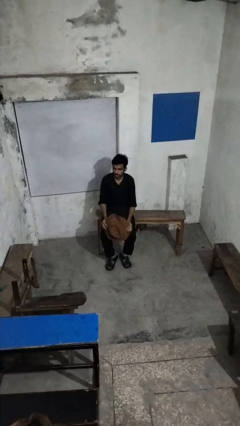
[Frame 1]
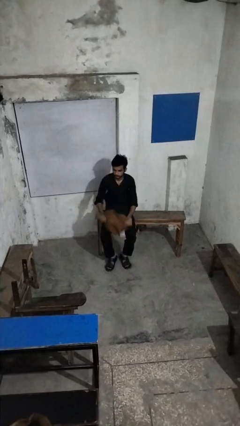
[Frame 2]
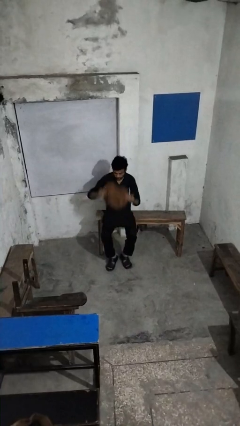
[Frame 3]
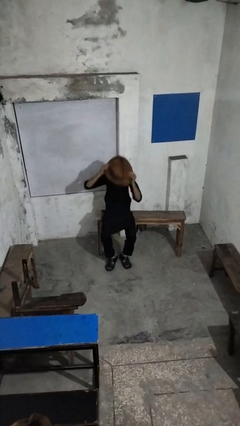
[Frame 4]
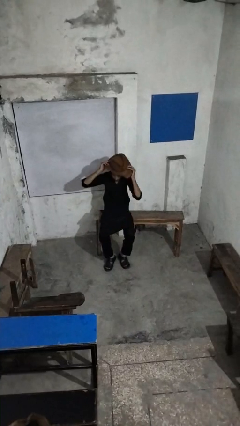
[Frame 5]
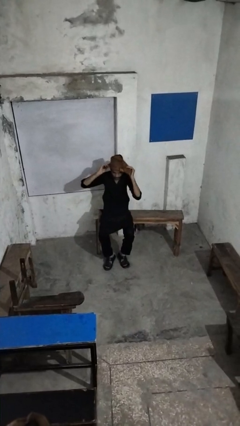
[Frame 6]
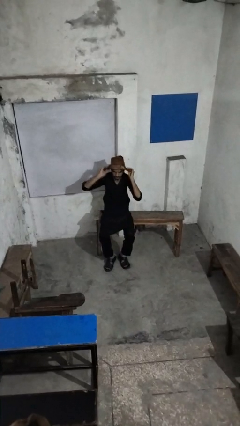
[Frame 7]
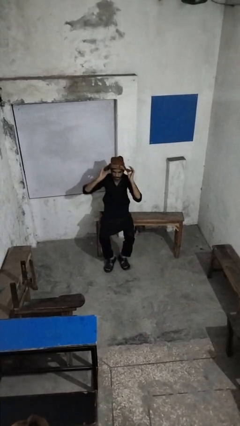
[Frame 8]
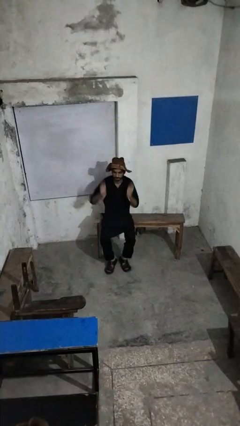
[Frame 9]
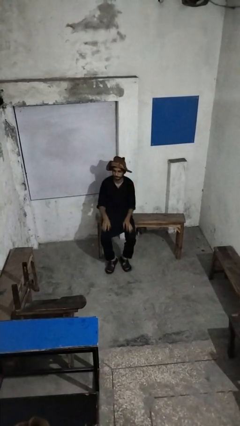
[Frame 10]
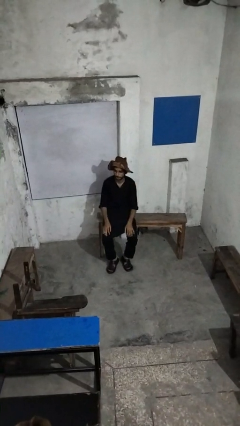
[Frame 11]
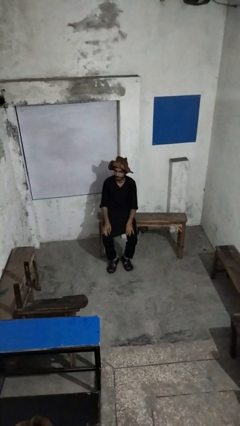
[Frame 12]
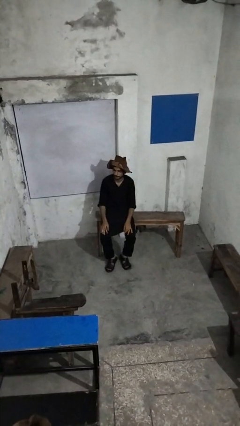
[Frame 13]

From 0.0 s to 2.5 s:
person puts on hat

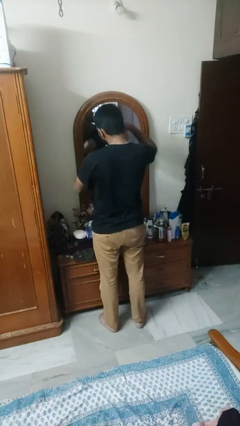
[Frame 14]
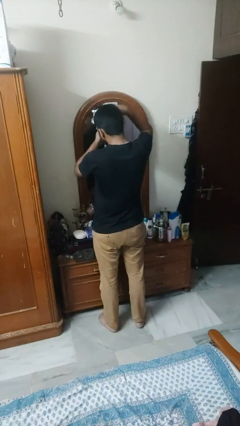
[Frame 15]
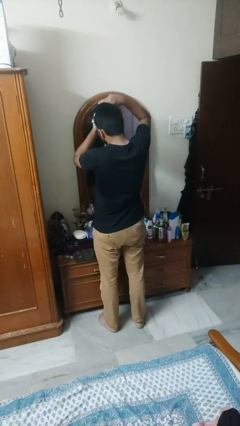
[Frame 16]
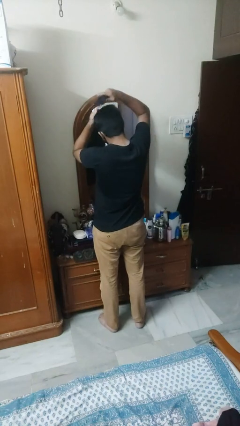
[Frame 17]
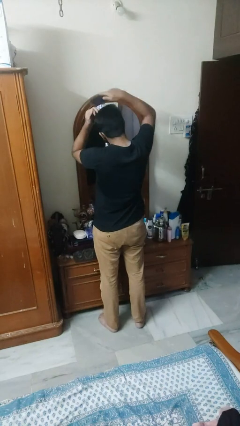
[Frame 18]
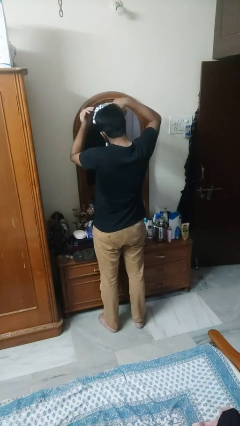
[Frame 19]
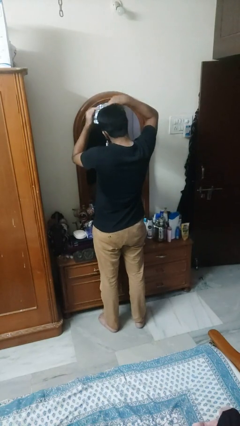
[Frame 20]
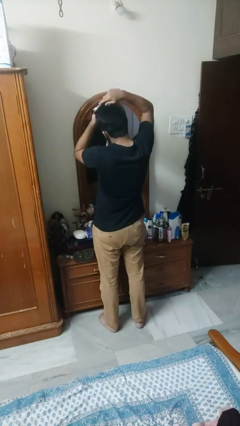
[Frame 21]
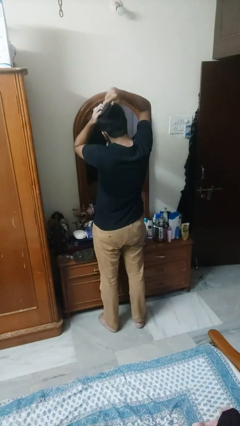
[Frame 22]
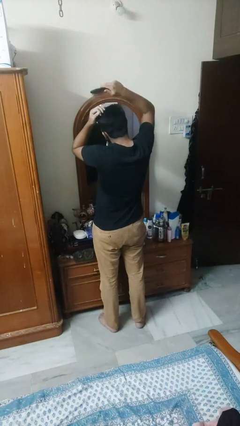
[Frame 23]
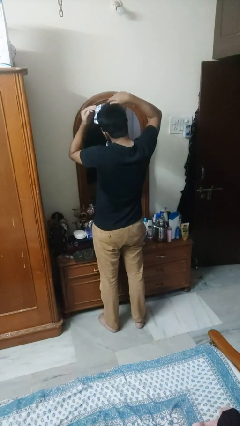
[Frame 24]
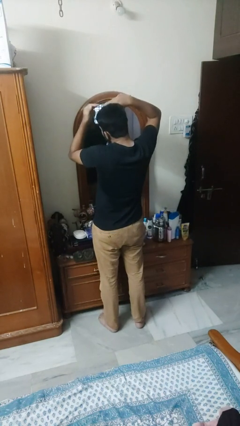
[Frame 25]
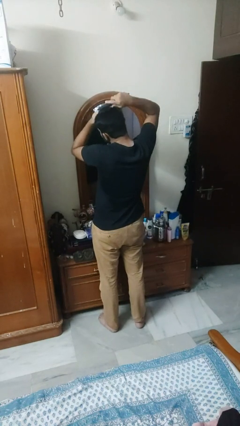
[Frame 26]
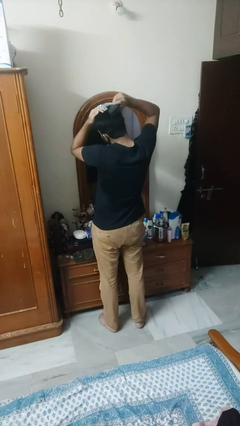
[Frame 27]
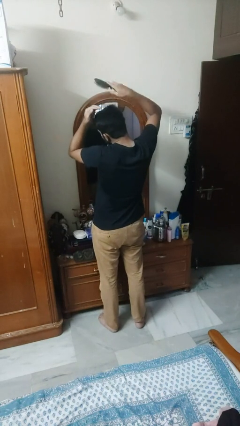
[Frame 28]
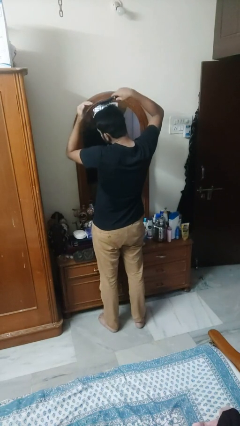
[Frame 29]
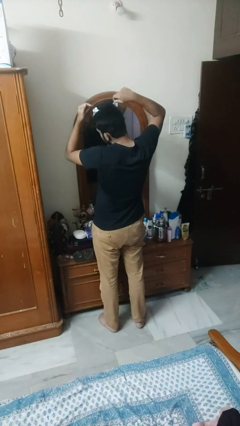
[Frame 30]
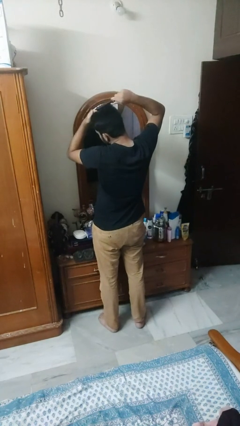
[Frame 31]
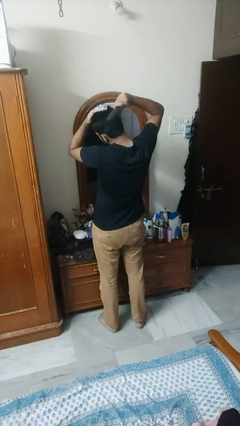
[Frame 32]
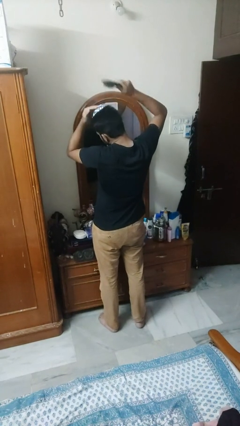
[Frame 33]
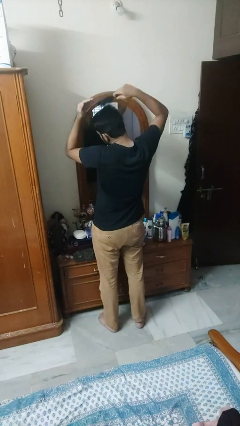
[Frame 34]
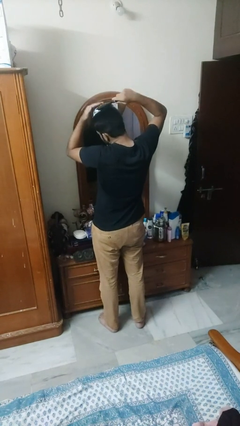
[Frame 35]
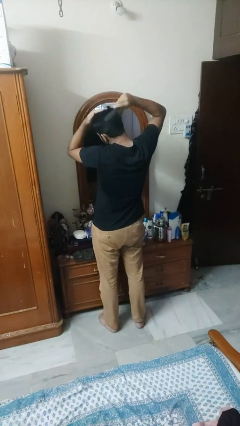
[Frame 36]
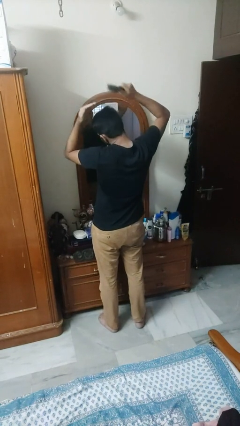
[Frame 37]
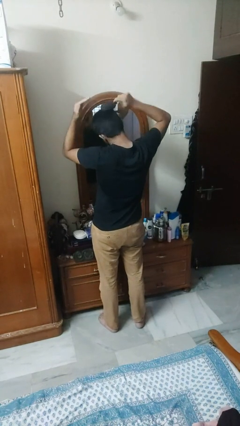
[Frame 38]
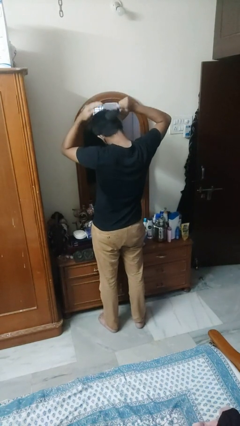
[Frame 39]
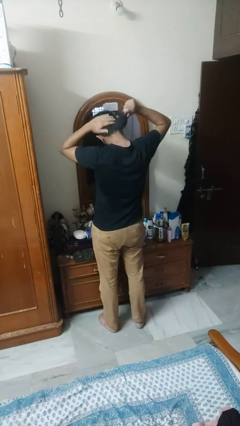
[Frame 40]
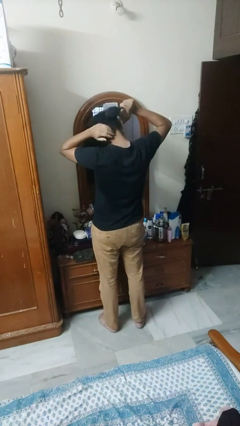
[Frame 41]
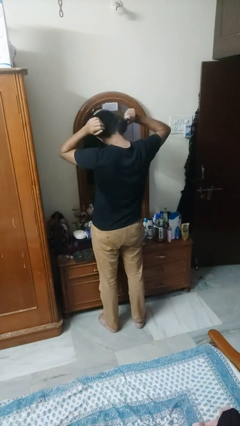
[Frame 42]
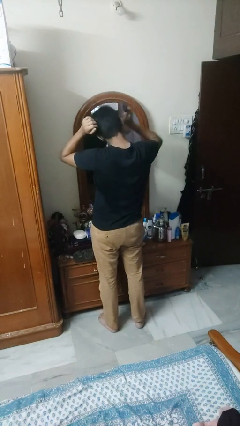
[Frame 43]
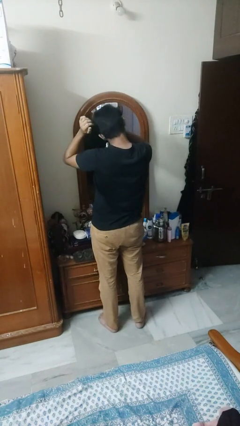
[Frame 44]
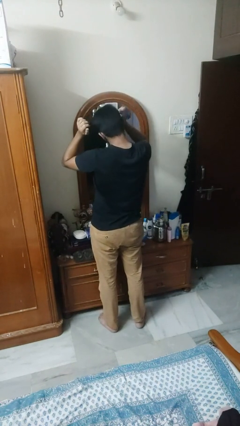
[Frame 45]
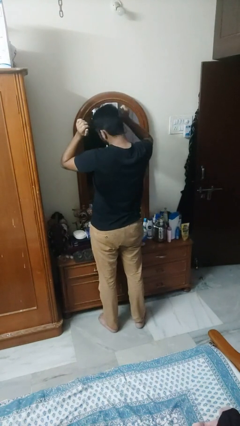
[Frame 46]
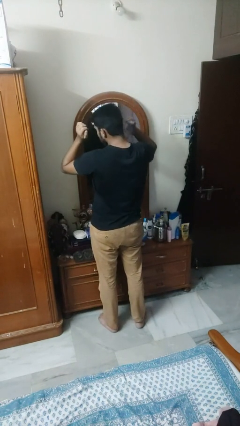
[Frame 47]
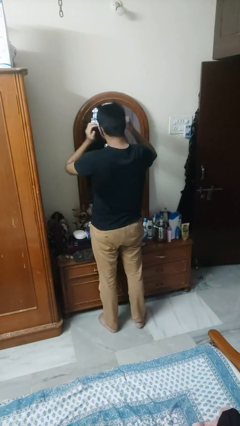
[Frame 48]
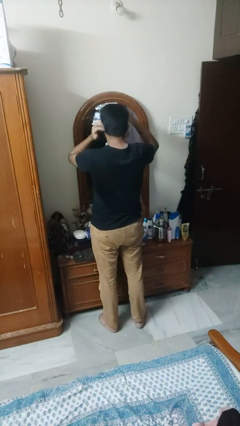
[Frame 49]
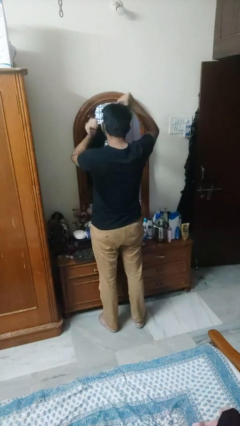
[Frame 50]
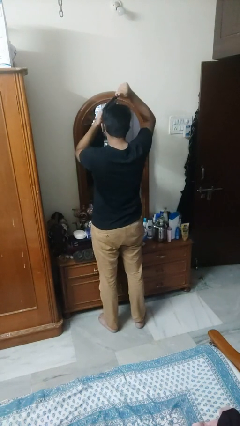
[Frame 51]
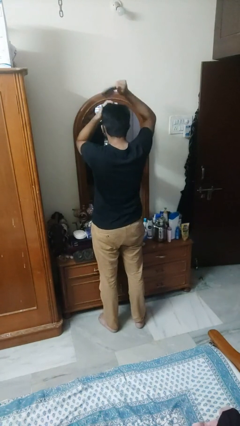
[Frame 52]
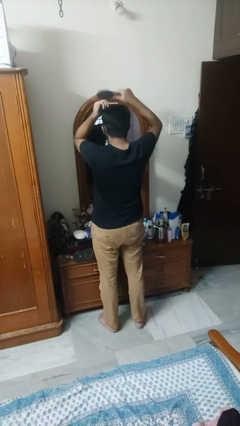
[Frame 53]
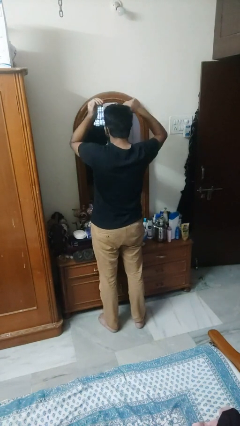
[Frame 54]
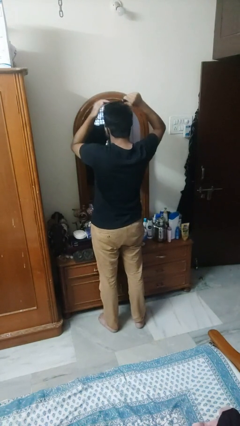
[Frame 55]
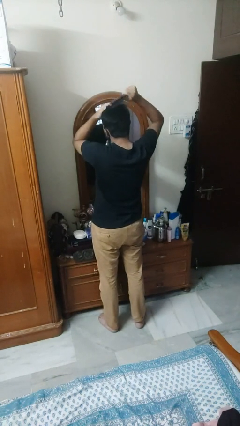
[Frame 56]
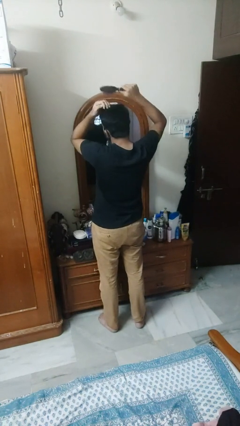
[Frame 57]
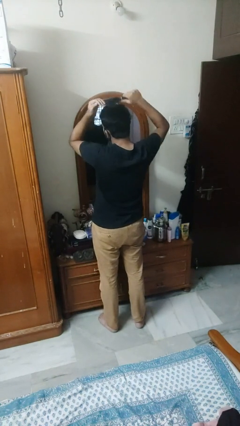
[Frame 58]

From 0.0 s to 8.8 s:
person brushes hair

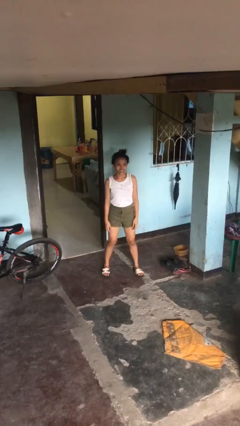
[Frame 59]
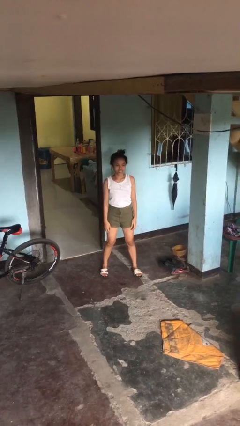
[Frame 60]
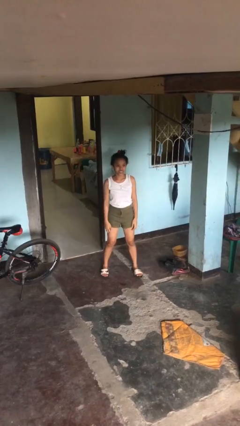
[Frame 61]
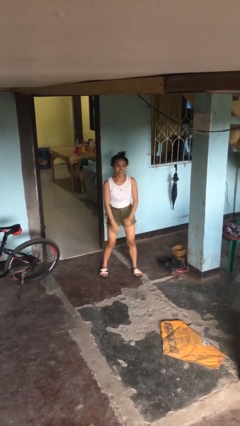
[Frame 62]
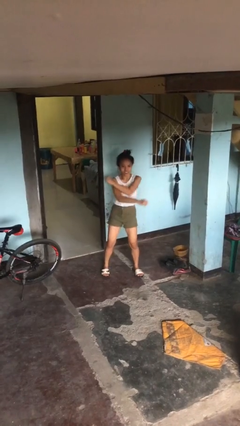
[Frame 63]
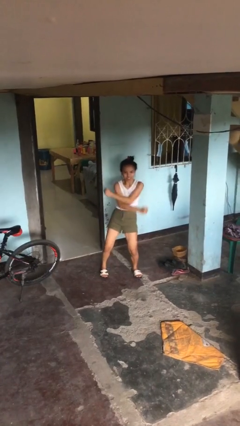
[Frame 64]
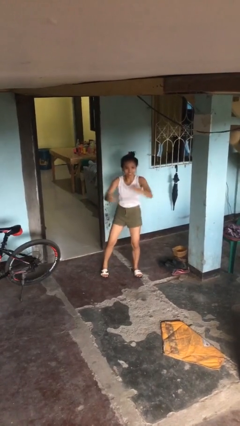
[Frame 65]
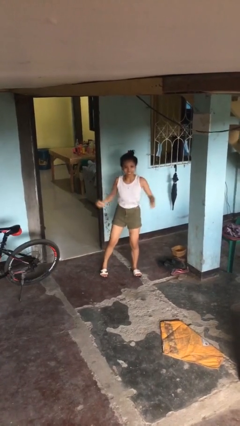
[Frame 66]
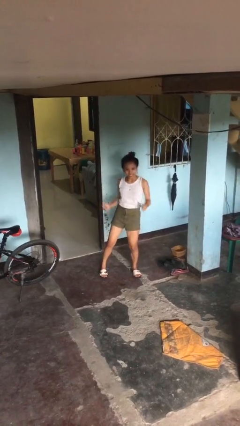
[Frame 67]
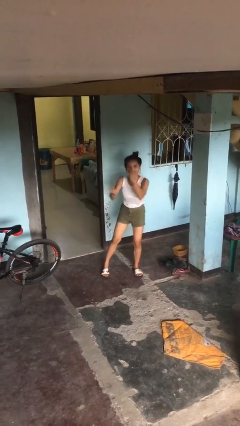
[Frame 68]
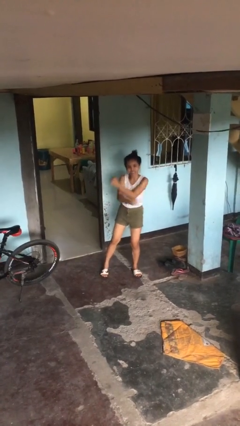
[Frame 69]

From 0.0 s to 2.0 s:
person dances in place

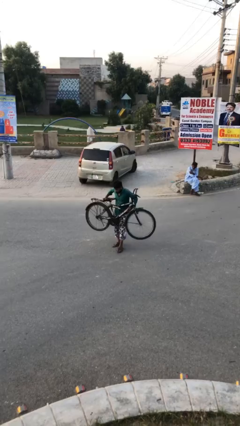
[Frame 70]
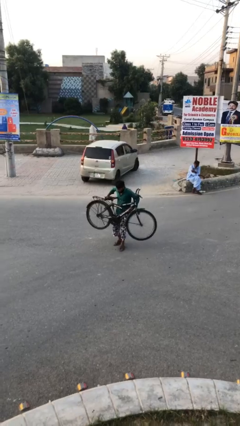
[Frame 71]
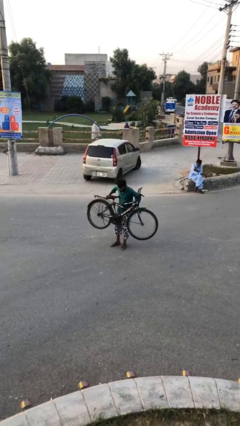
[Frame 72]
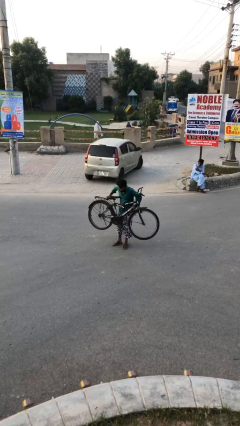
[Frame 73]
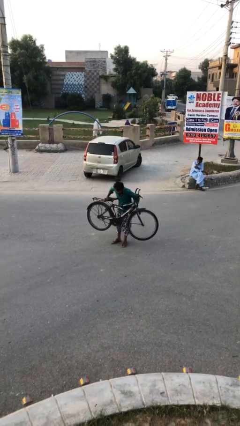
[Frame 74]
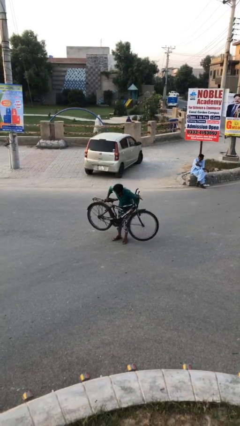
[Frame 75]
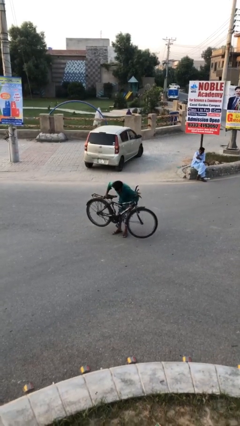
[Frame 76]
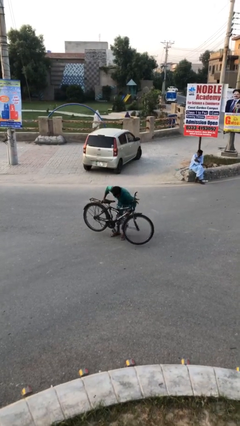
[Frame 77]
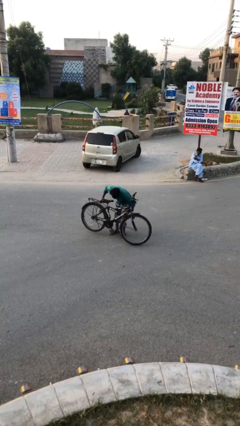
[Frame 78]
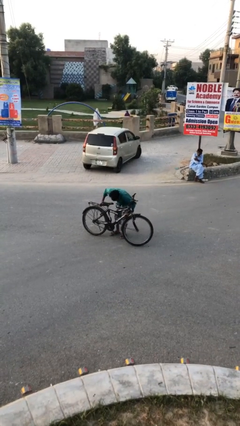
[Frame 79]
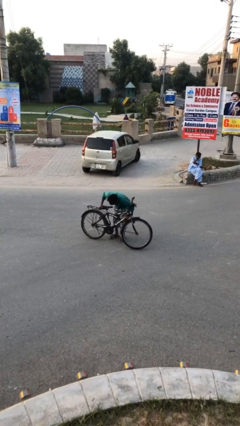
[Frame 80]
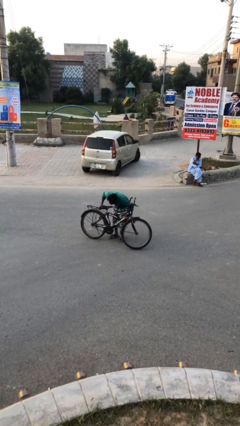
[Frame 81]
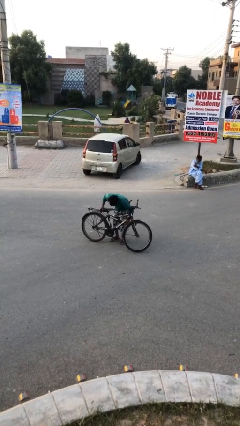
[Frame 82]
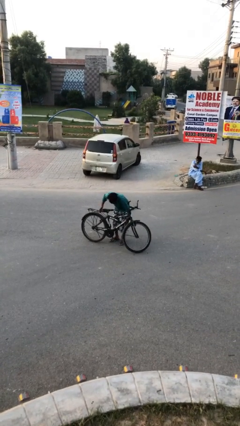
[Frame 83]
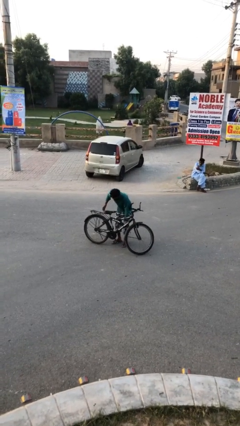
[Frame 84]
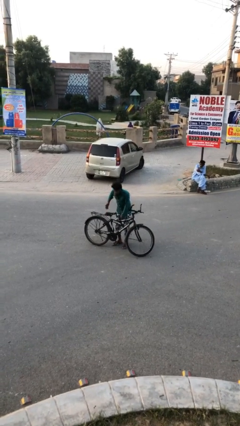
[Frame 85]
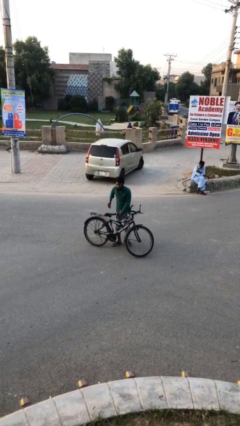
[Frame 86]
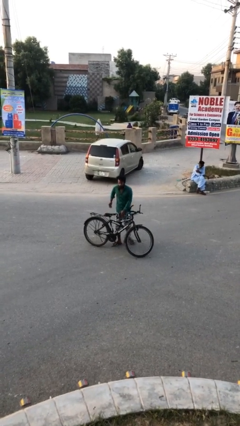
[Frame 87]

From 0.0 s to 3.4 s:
person puts down object on floor

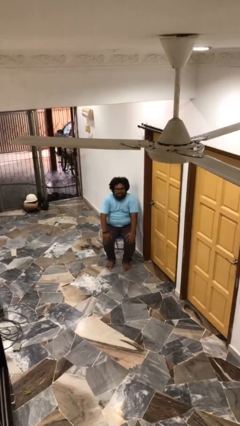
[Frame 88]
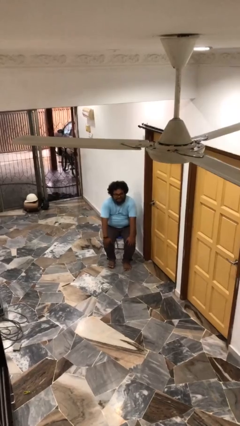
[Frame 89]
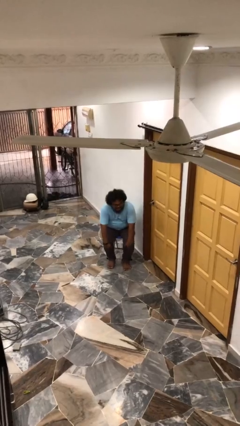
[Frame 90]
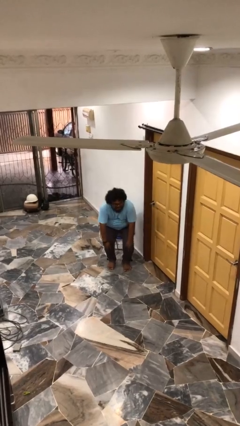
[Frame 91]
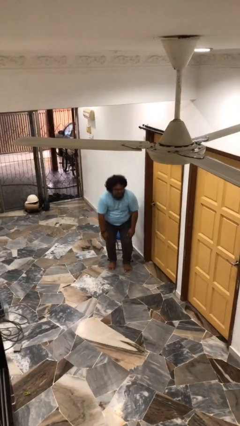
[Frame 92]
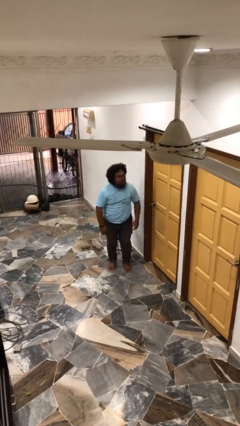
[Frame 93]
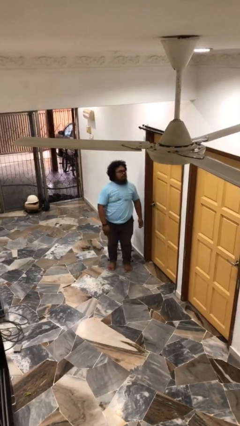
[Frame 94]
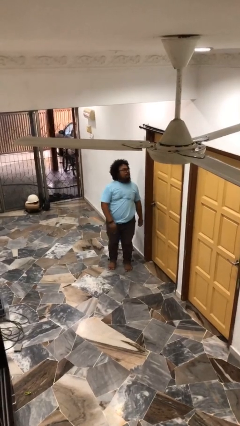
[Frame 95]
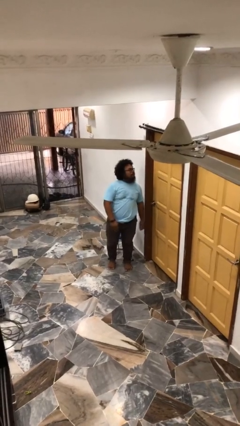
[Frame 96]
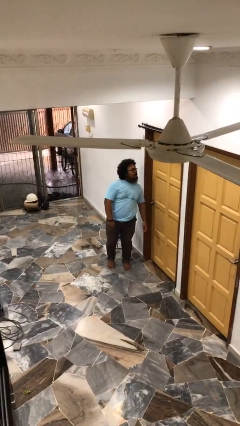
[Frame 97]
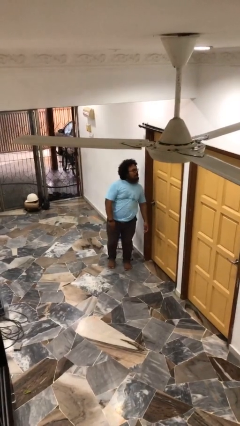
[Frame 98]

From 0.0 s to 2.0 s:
person stands up
